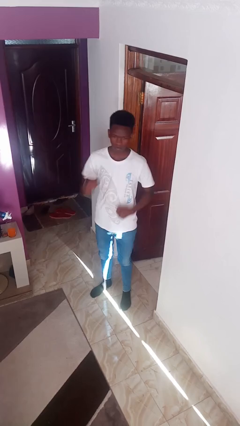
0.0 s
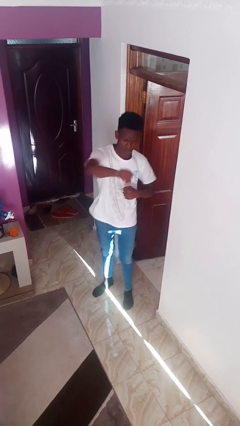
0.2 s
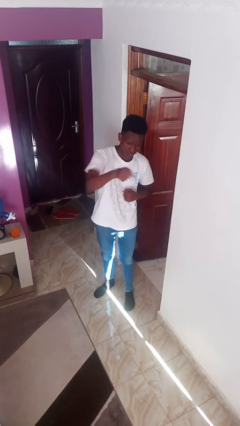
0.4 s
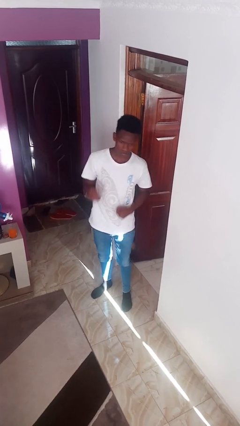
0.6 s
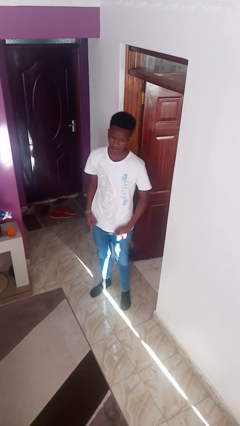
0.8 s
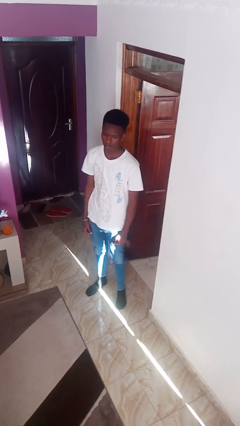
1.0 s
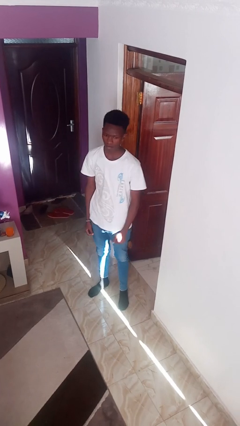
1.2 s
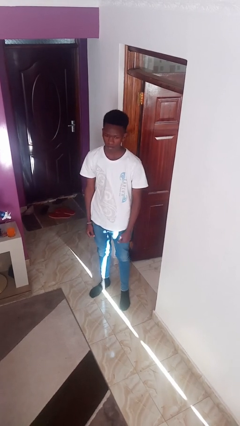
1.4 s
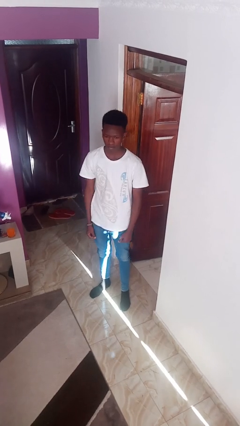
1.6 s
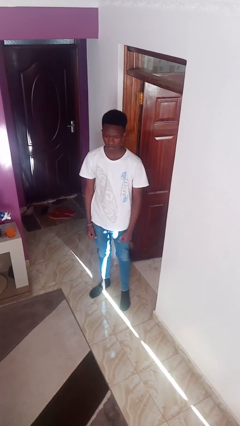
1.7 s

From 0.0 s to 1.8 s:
person punches

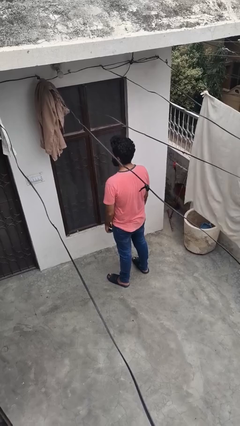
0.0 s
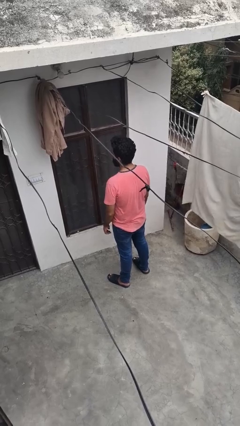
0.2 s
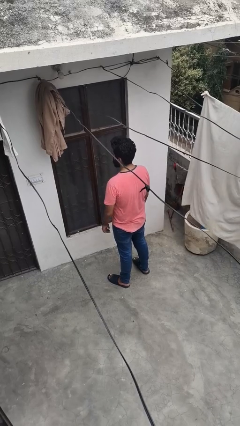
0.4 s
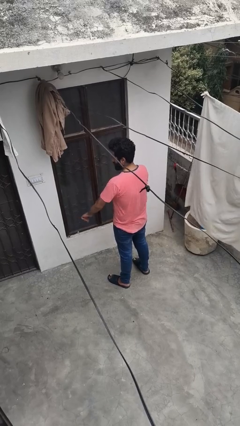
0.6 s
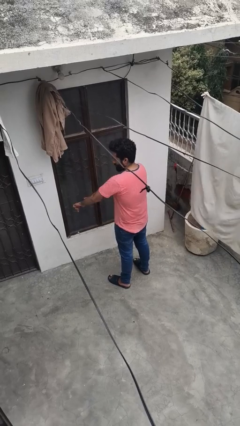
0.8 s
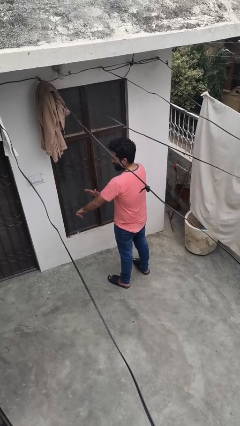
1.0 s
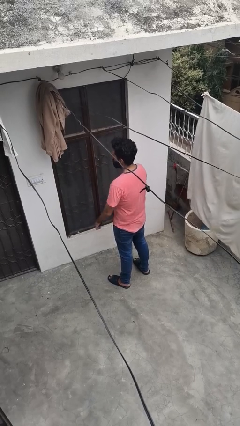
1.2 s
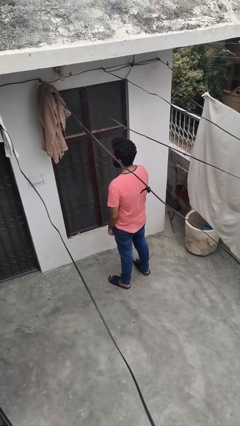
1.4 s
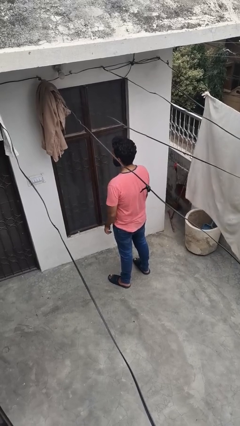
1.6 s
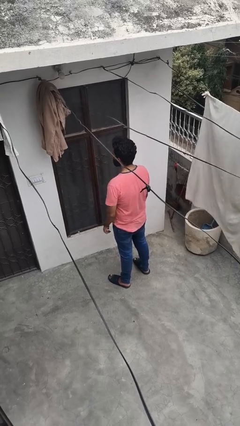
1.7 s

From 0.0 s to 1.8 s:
person swats bug

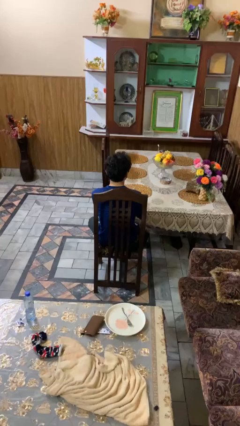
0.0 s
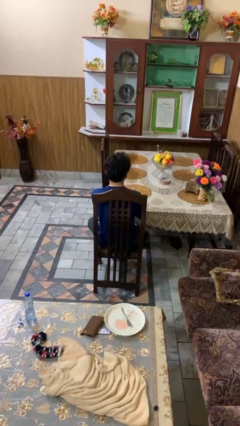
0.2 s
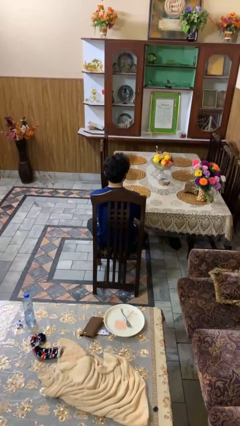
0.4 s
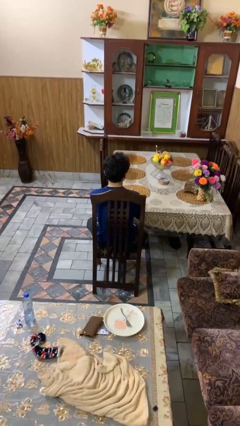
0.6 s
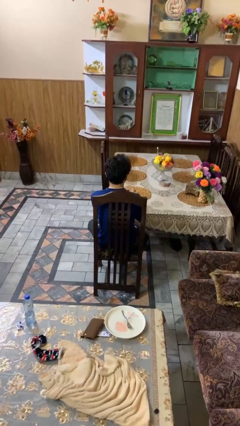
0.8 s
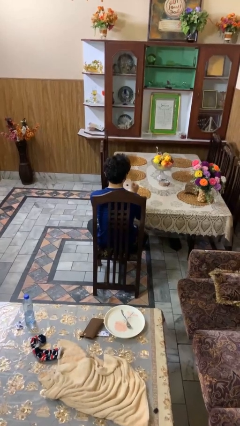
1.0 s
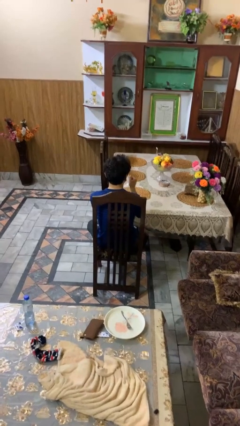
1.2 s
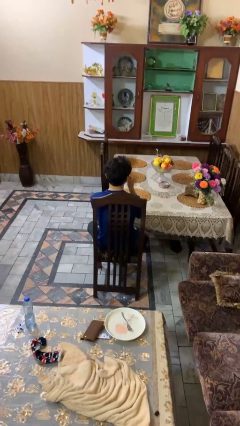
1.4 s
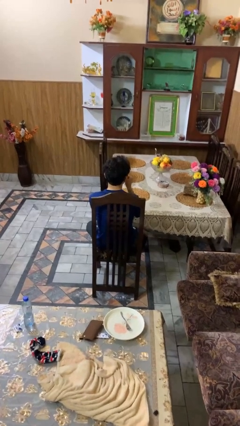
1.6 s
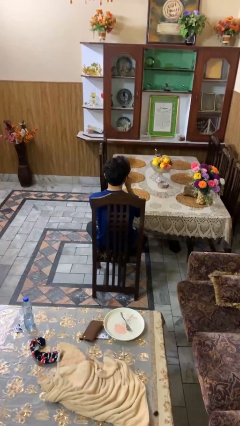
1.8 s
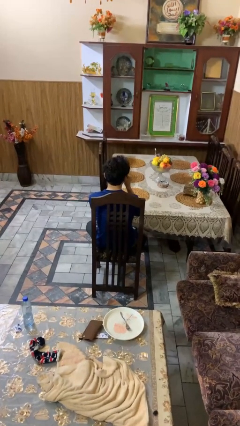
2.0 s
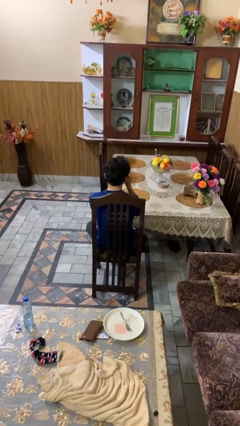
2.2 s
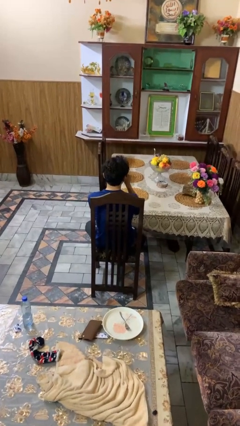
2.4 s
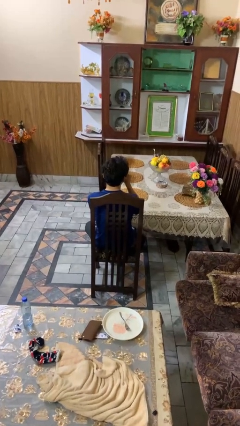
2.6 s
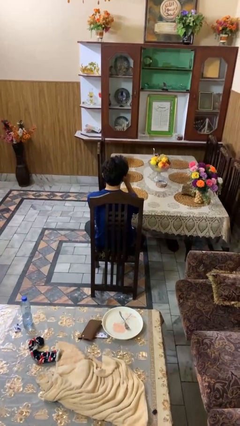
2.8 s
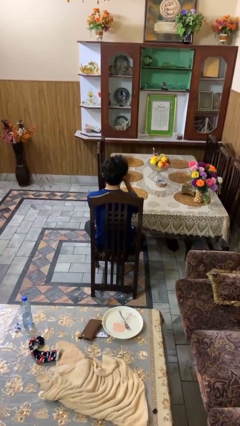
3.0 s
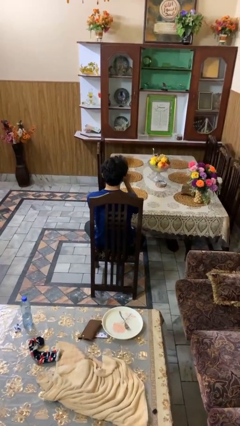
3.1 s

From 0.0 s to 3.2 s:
person drinks from mug

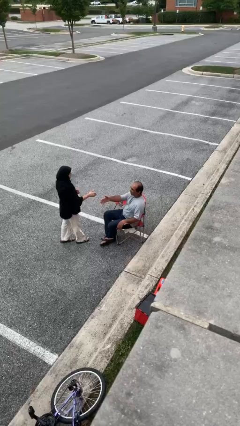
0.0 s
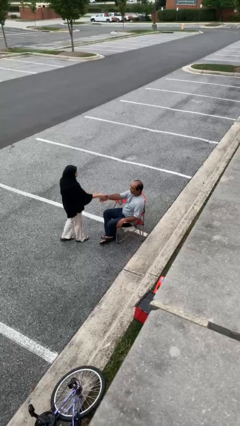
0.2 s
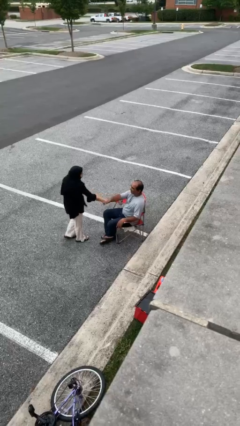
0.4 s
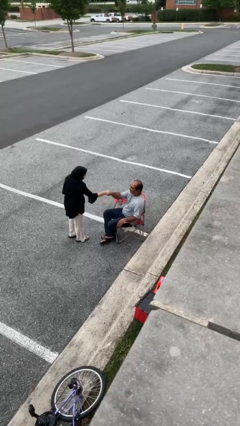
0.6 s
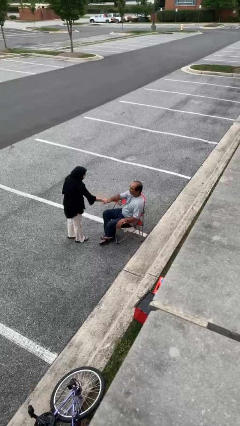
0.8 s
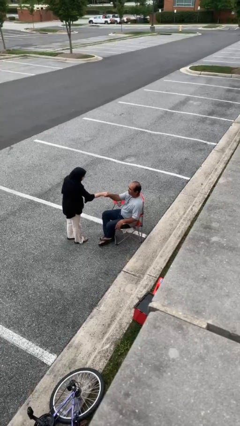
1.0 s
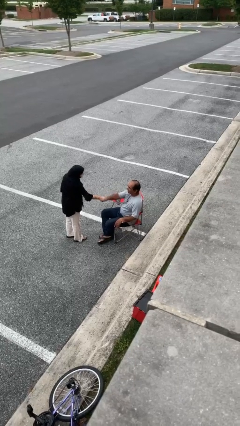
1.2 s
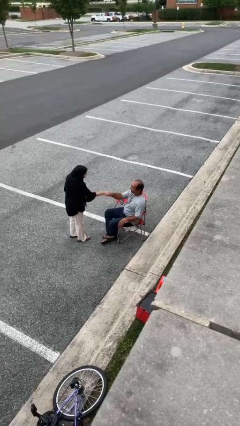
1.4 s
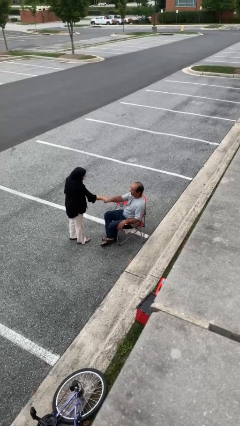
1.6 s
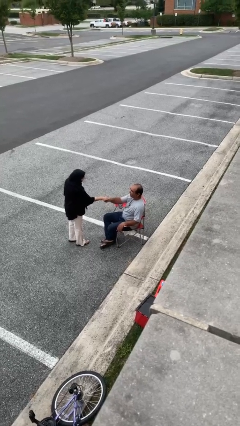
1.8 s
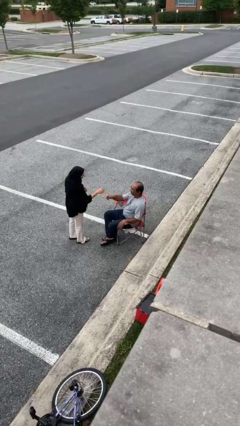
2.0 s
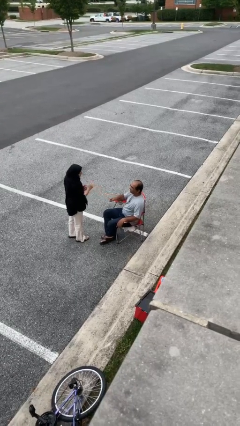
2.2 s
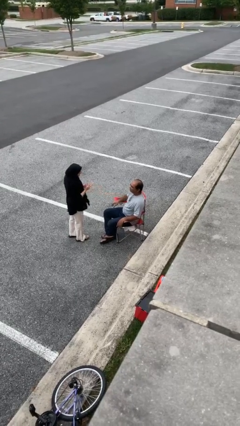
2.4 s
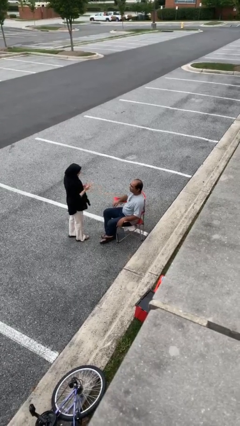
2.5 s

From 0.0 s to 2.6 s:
person shakes hand

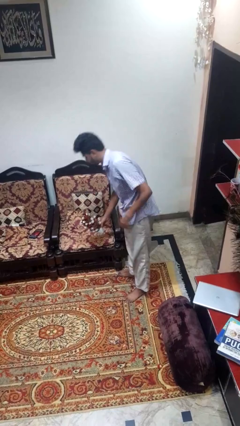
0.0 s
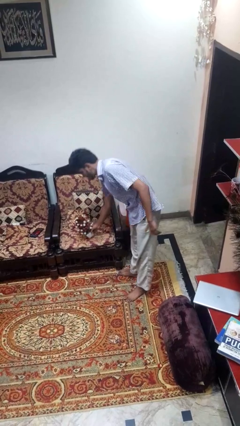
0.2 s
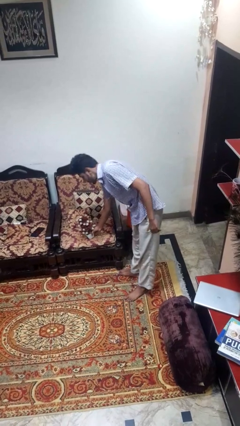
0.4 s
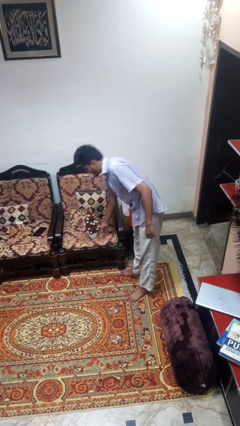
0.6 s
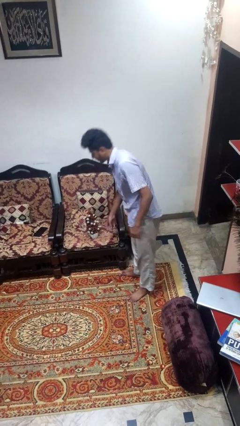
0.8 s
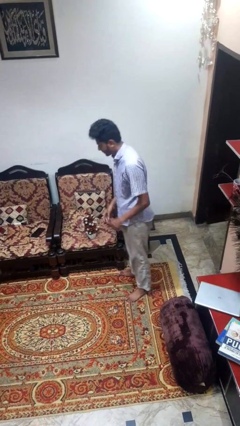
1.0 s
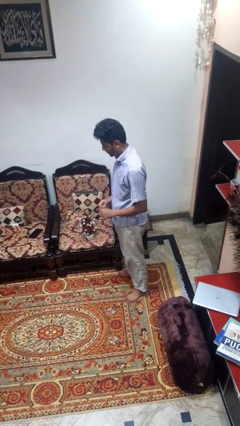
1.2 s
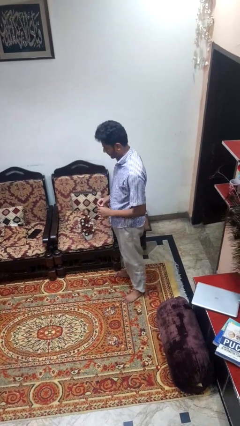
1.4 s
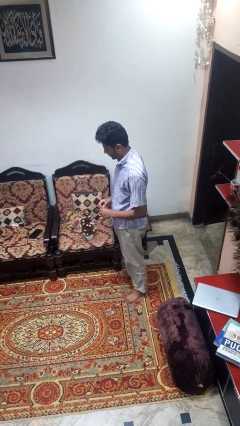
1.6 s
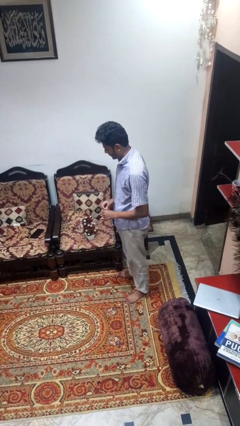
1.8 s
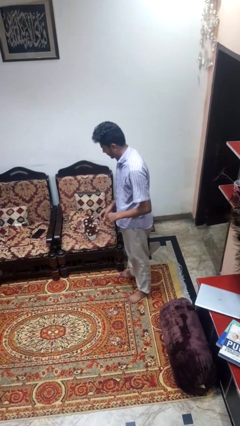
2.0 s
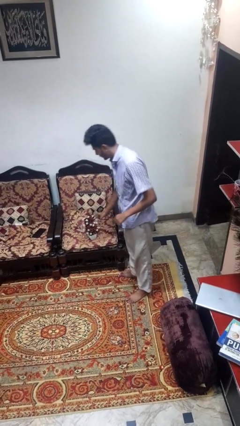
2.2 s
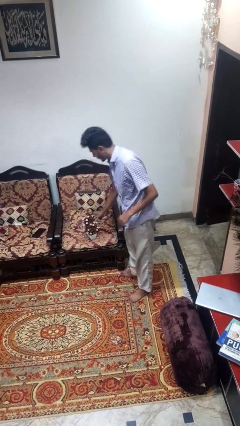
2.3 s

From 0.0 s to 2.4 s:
person puts down object on couch

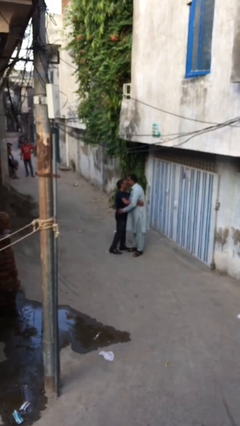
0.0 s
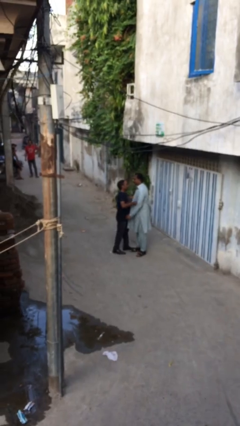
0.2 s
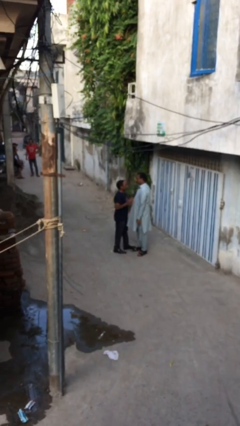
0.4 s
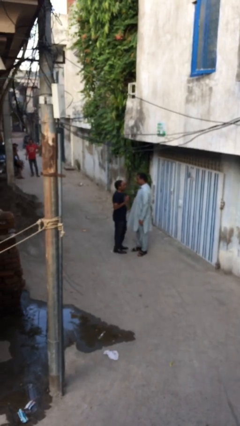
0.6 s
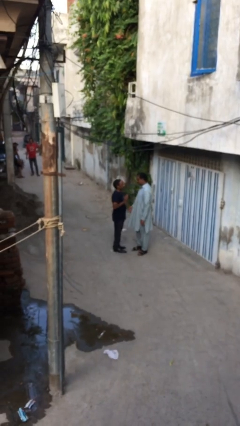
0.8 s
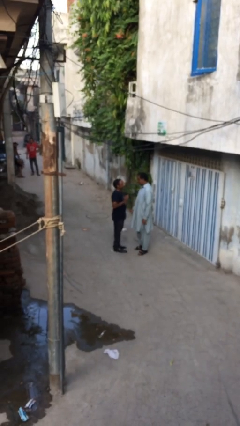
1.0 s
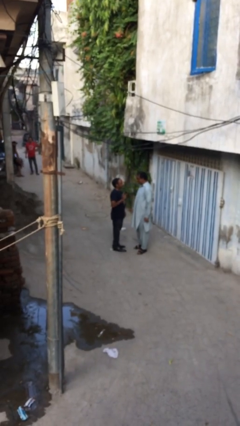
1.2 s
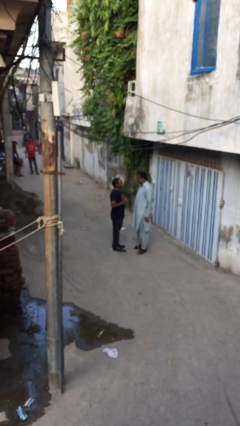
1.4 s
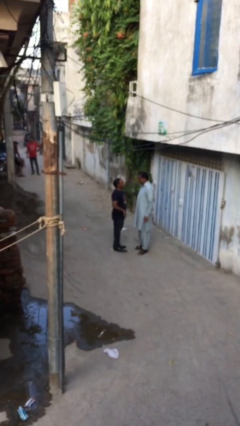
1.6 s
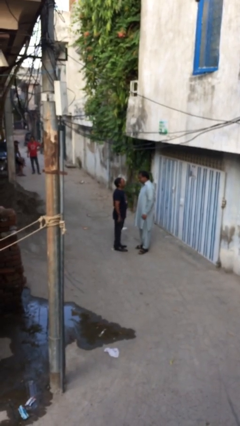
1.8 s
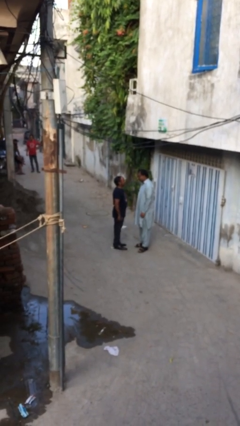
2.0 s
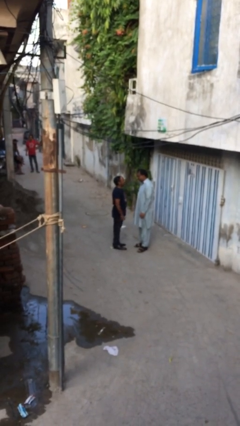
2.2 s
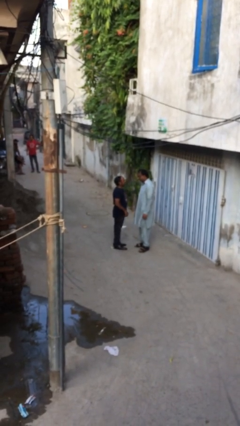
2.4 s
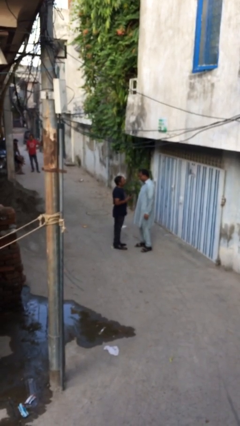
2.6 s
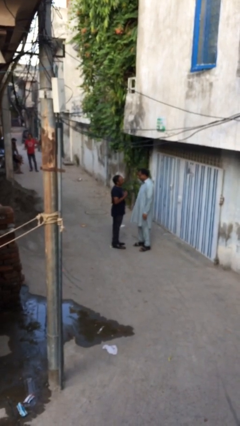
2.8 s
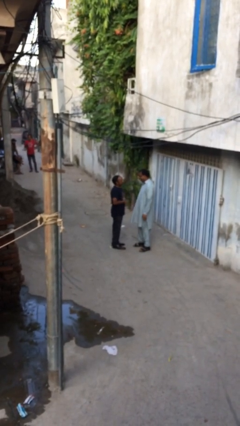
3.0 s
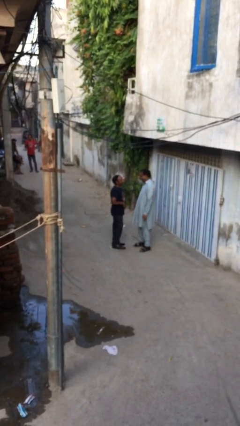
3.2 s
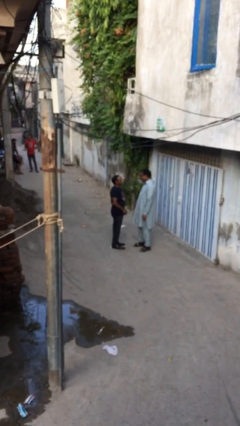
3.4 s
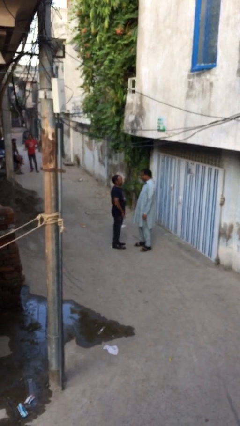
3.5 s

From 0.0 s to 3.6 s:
person talks to person

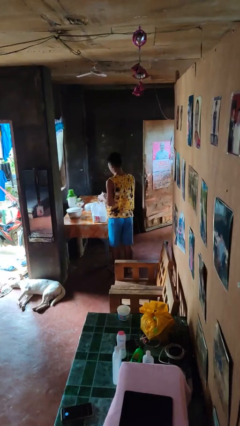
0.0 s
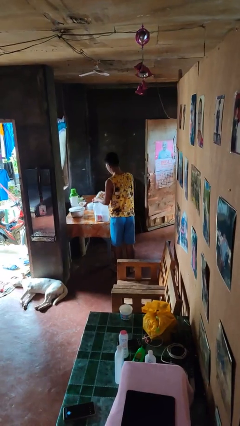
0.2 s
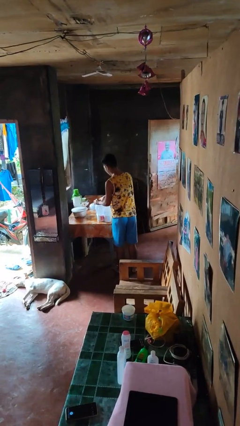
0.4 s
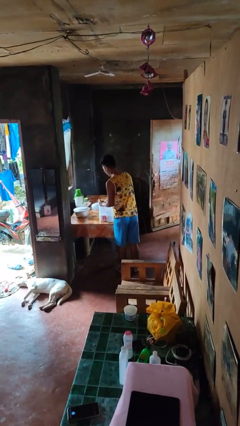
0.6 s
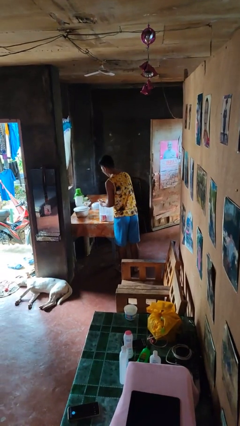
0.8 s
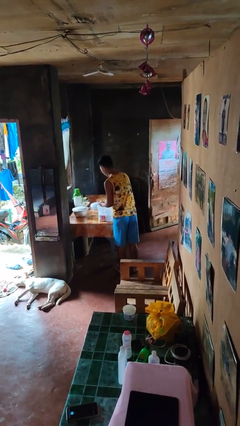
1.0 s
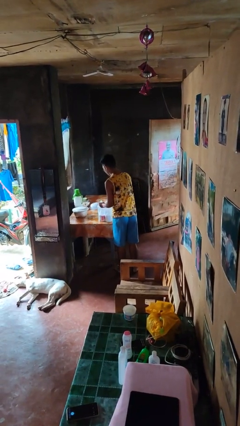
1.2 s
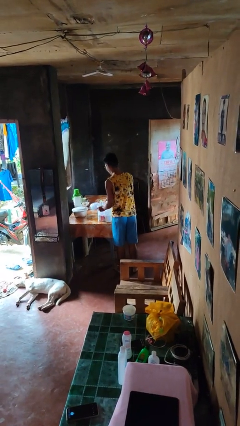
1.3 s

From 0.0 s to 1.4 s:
person puts object into bag

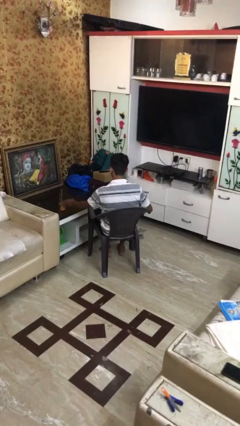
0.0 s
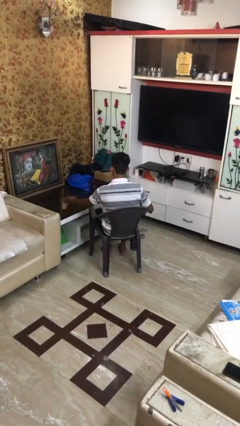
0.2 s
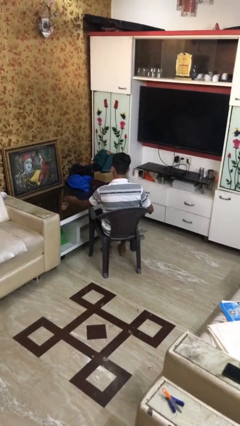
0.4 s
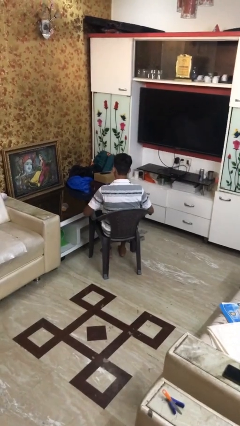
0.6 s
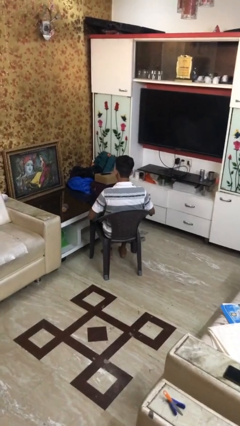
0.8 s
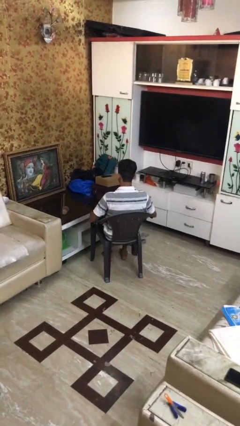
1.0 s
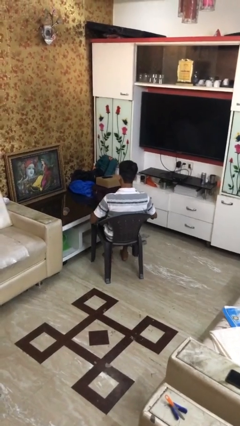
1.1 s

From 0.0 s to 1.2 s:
person spills on table
